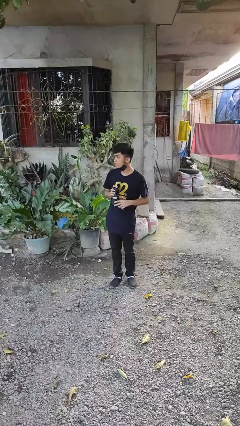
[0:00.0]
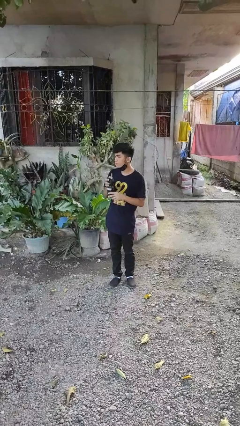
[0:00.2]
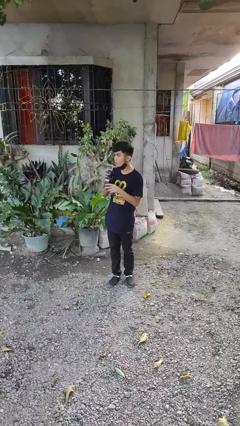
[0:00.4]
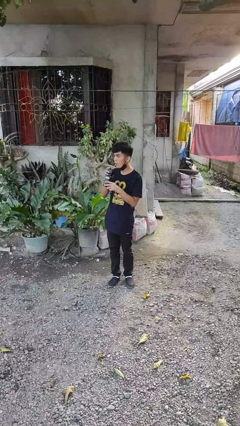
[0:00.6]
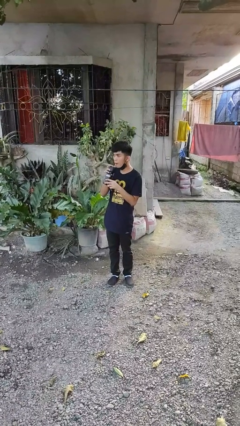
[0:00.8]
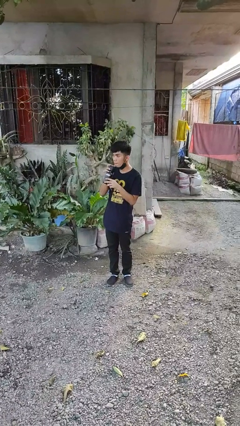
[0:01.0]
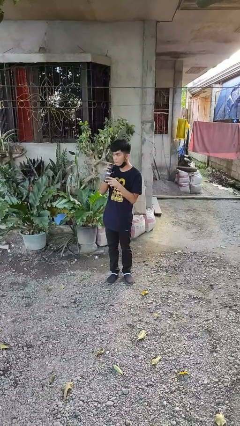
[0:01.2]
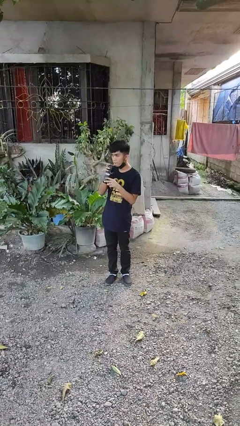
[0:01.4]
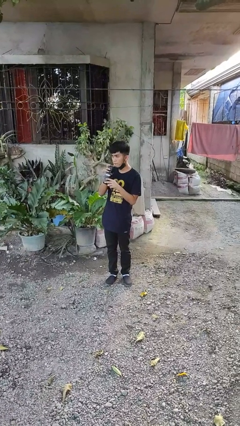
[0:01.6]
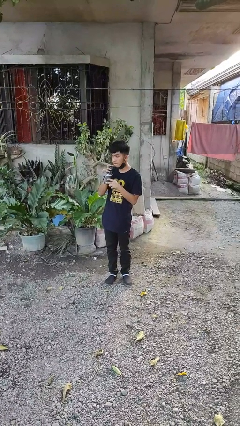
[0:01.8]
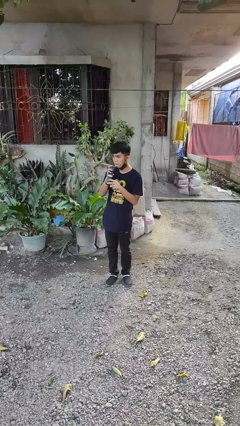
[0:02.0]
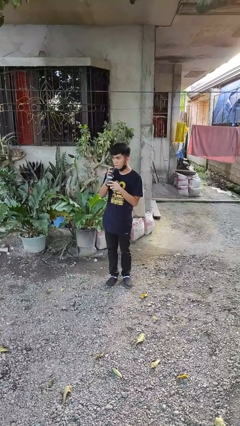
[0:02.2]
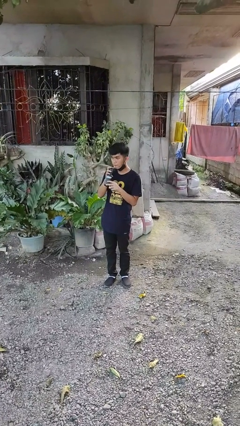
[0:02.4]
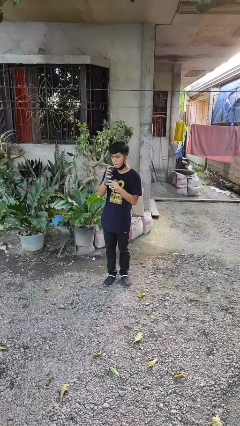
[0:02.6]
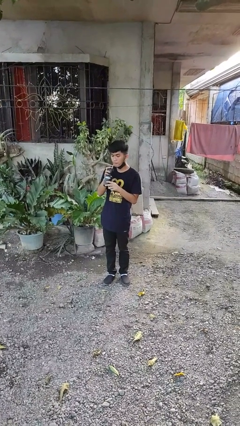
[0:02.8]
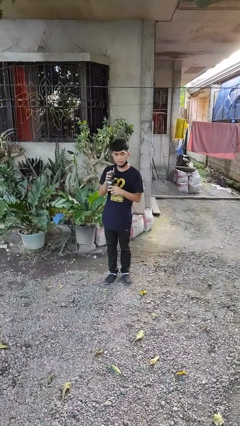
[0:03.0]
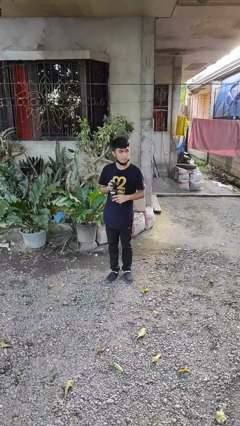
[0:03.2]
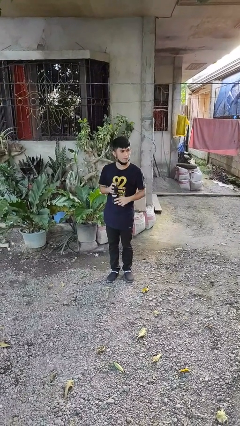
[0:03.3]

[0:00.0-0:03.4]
person drinks from straw

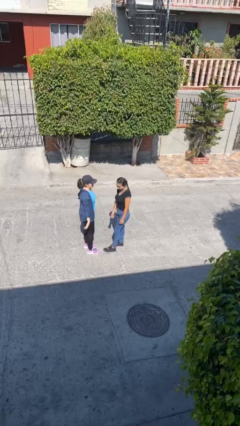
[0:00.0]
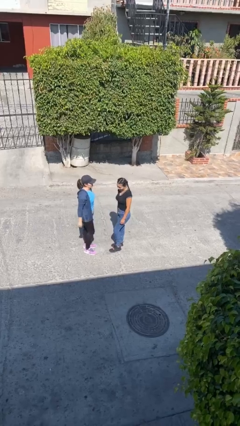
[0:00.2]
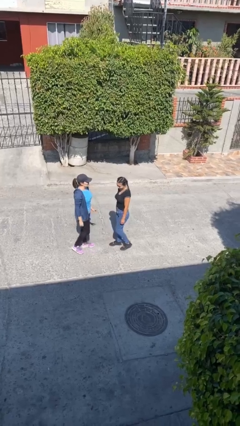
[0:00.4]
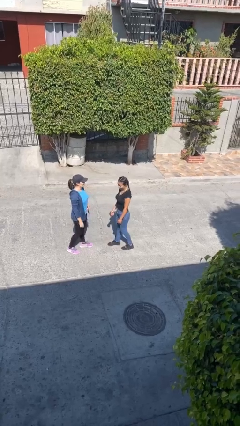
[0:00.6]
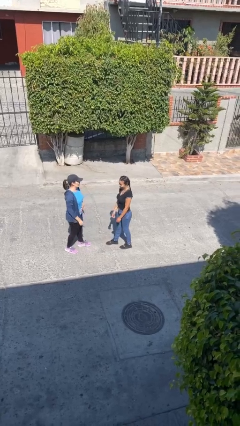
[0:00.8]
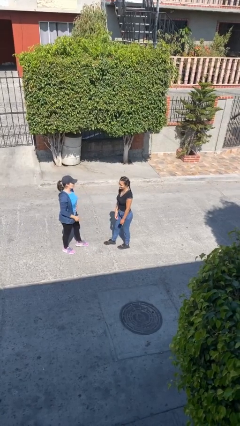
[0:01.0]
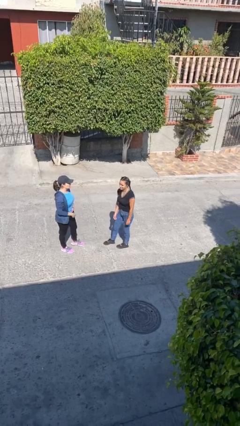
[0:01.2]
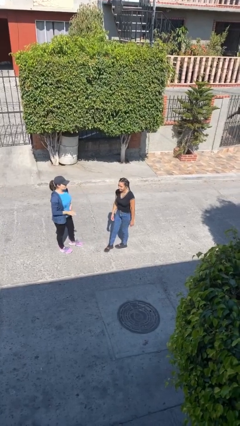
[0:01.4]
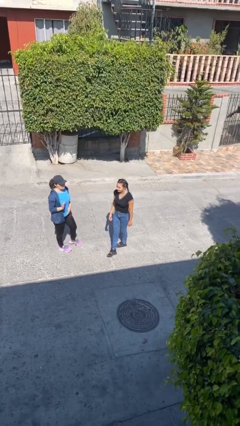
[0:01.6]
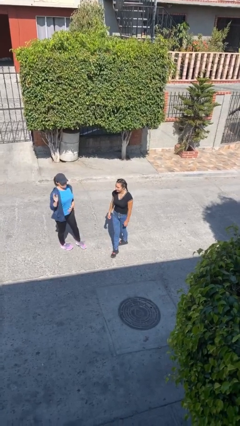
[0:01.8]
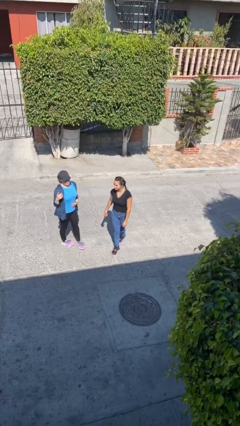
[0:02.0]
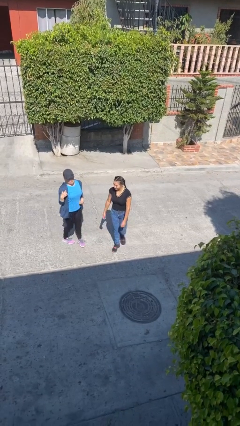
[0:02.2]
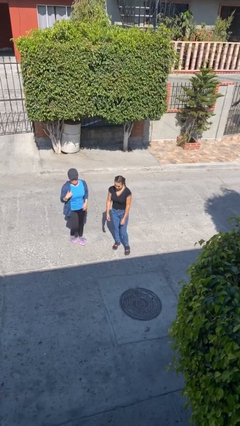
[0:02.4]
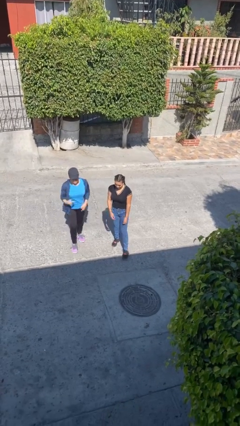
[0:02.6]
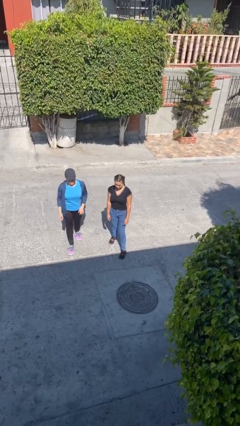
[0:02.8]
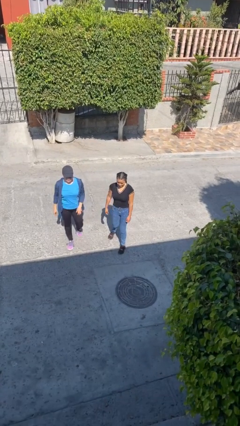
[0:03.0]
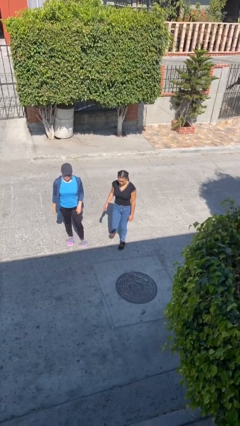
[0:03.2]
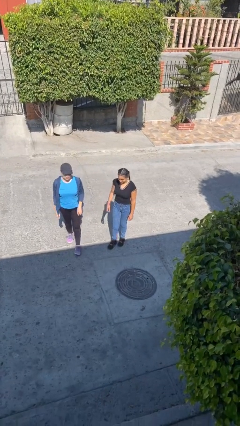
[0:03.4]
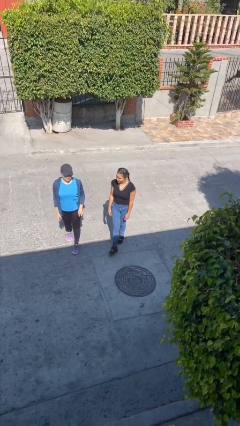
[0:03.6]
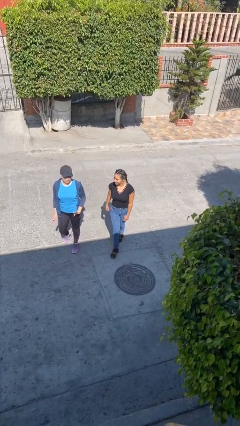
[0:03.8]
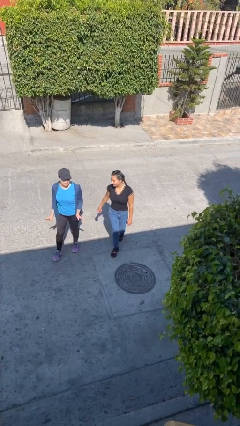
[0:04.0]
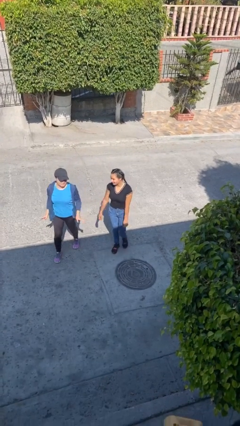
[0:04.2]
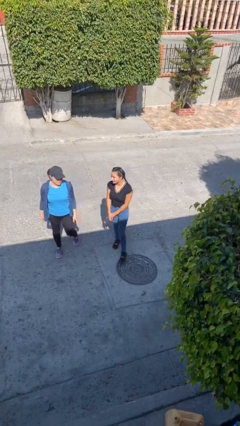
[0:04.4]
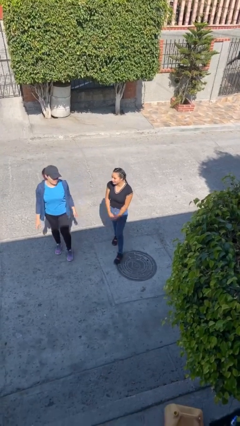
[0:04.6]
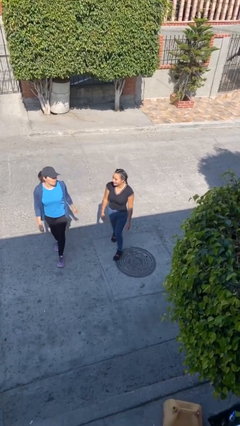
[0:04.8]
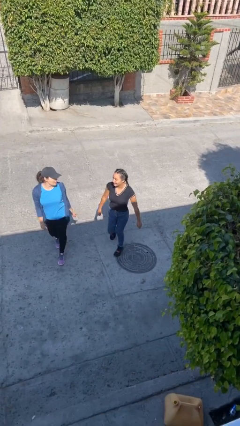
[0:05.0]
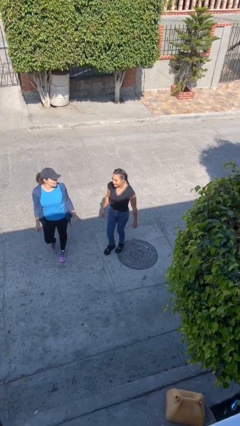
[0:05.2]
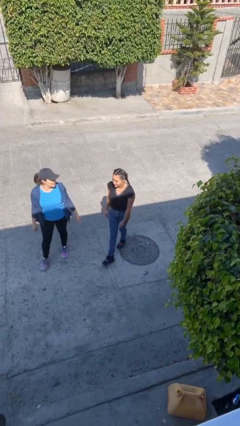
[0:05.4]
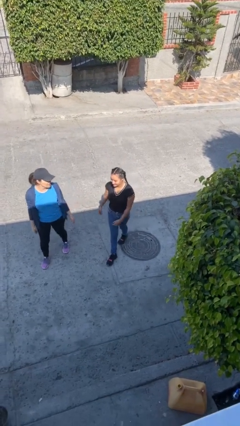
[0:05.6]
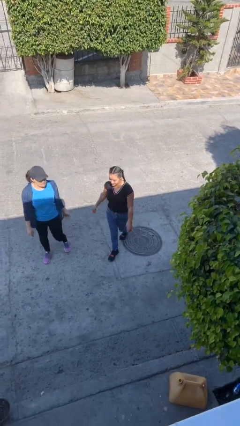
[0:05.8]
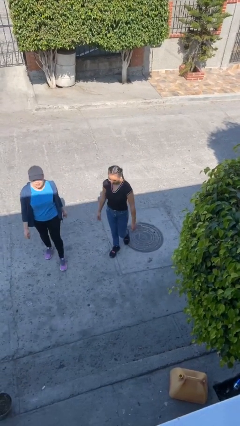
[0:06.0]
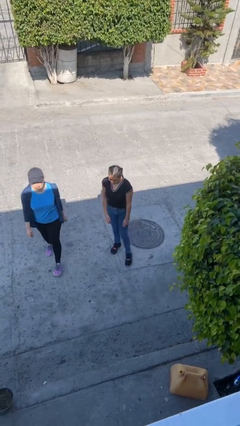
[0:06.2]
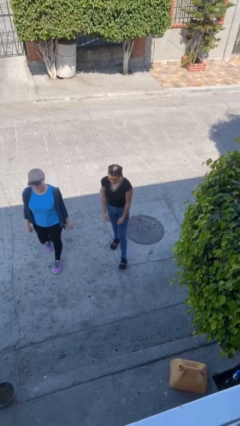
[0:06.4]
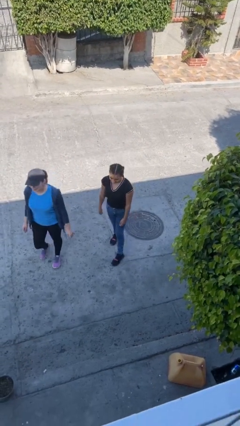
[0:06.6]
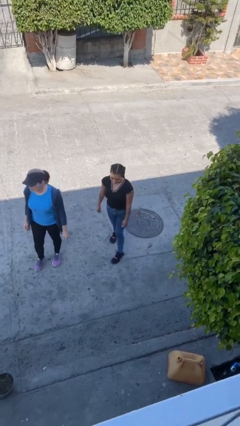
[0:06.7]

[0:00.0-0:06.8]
person talks to person

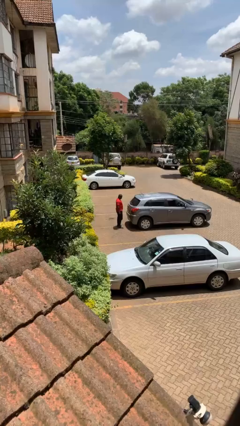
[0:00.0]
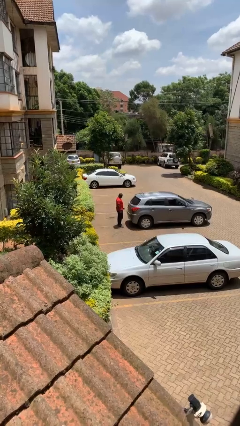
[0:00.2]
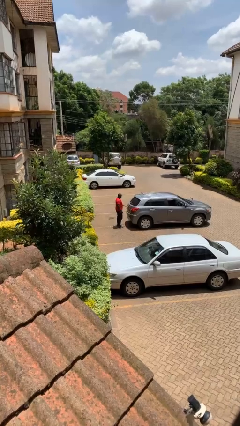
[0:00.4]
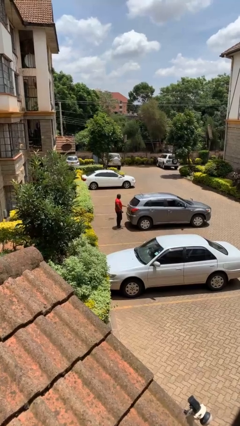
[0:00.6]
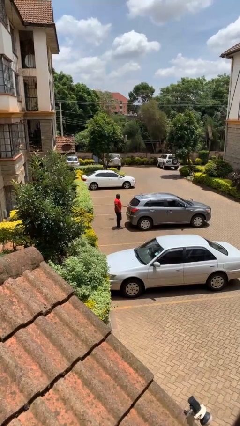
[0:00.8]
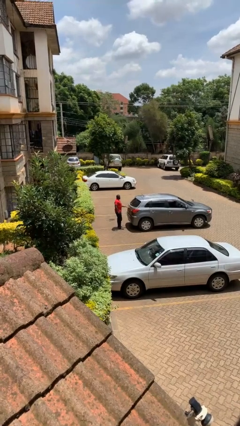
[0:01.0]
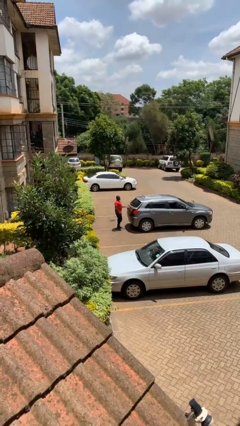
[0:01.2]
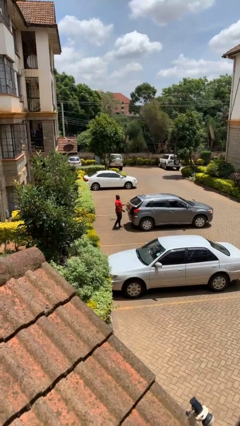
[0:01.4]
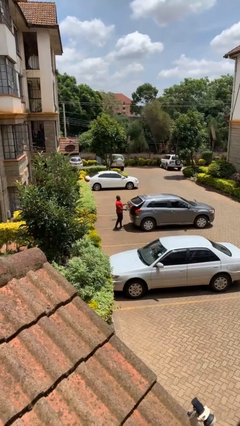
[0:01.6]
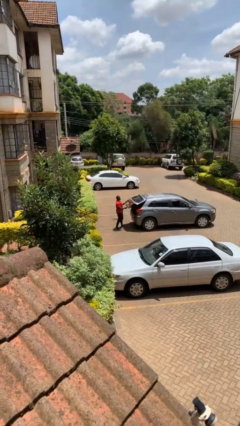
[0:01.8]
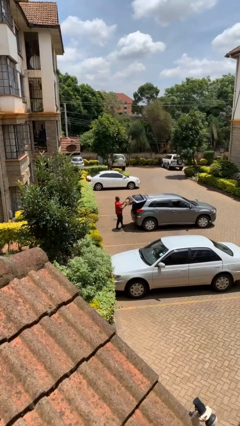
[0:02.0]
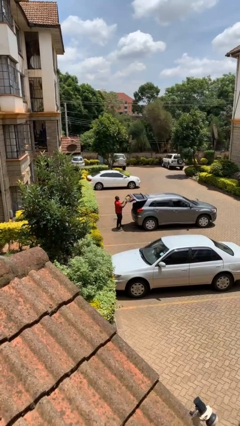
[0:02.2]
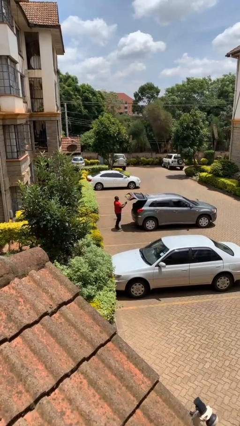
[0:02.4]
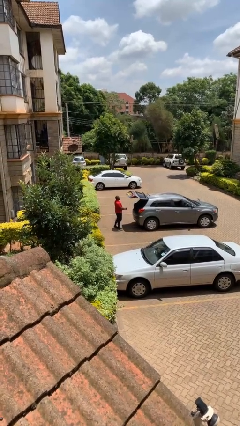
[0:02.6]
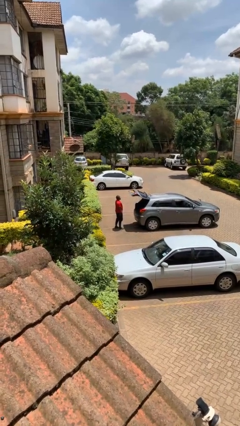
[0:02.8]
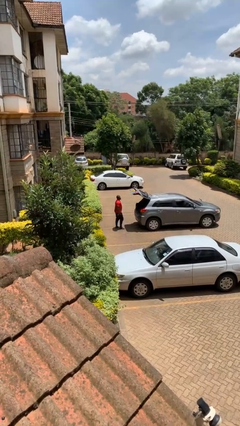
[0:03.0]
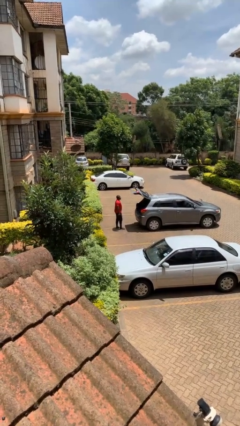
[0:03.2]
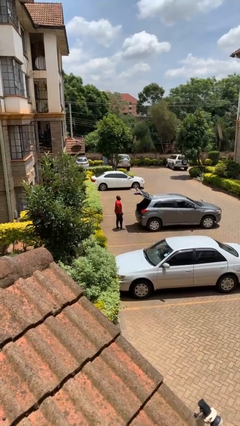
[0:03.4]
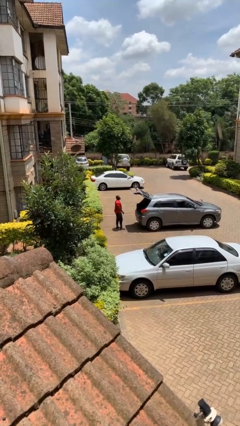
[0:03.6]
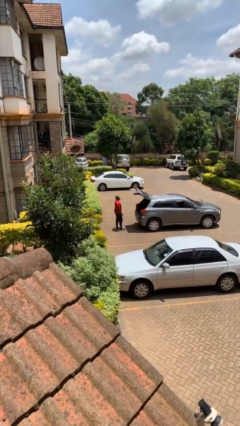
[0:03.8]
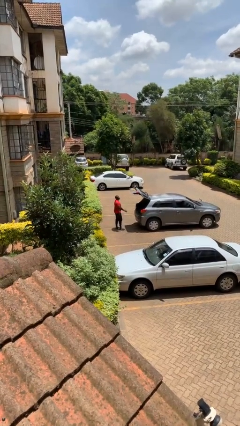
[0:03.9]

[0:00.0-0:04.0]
person opens car trunk

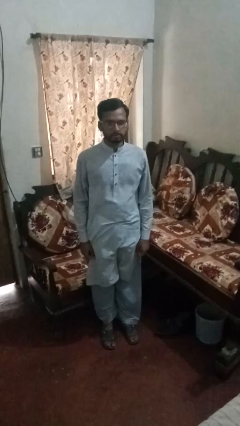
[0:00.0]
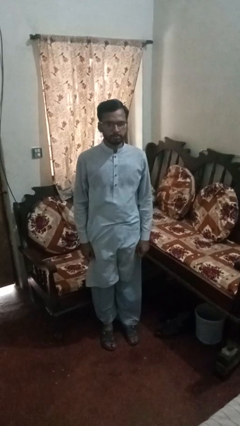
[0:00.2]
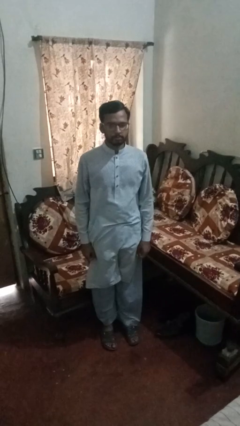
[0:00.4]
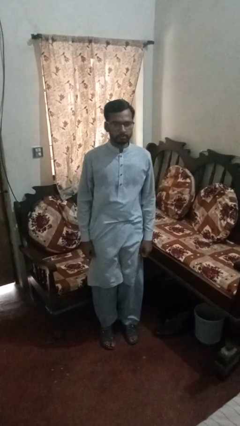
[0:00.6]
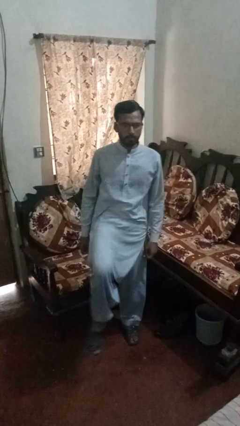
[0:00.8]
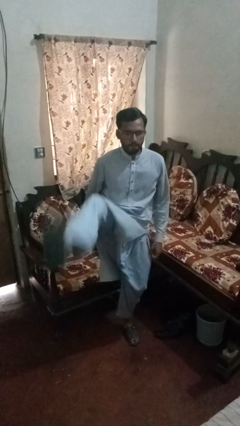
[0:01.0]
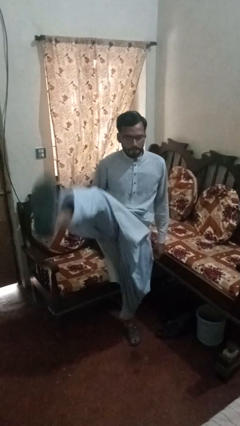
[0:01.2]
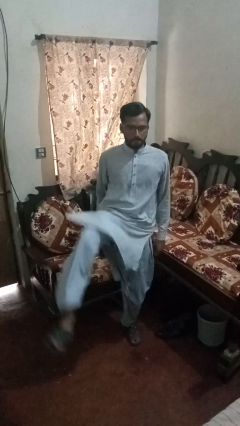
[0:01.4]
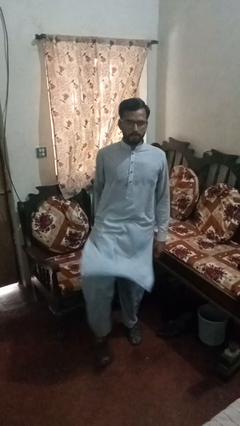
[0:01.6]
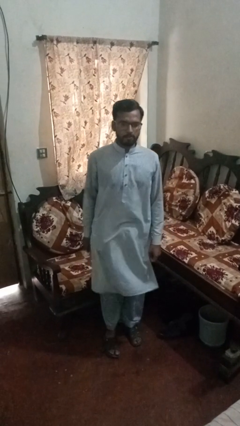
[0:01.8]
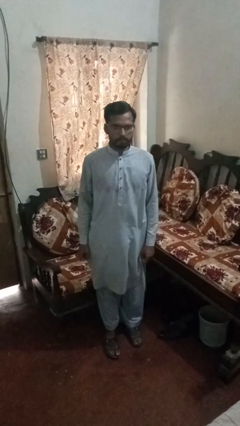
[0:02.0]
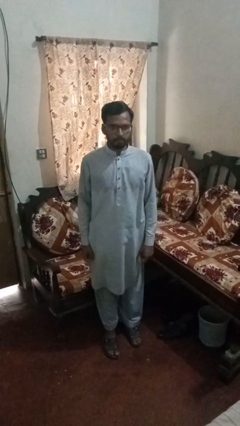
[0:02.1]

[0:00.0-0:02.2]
person karate kicks

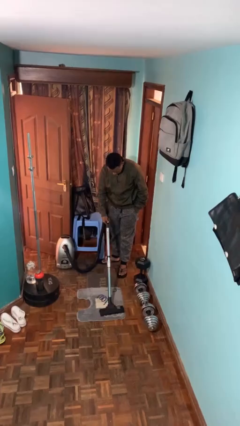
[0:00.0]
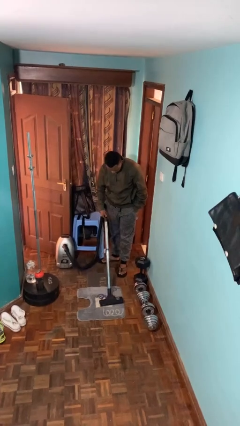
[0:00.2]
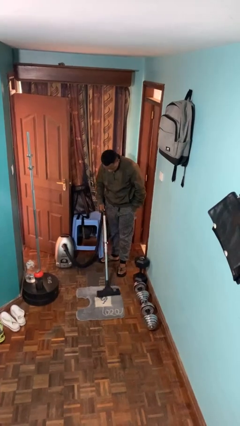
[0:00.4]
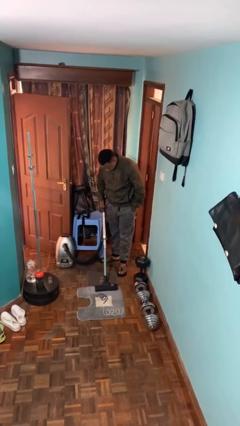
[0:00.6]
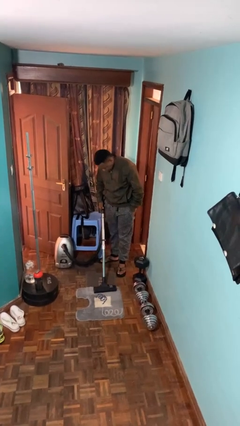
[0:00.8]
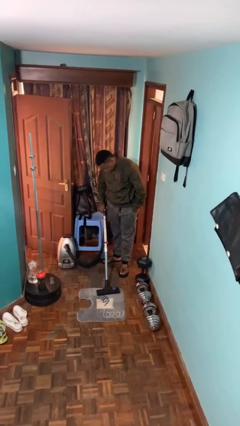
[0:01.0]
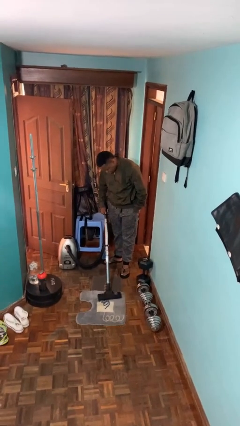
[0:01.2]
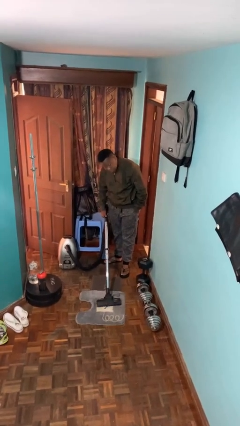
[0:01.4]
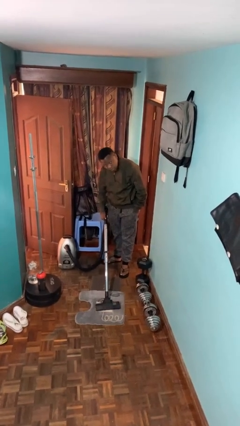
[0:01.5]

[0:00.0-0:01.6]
person vacuums carpet
